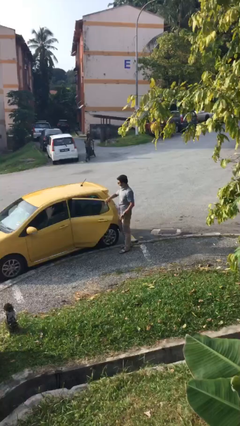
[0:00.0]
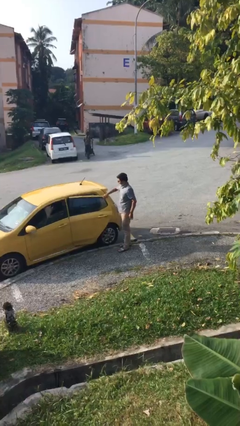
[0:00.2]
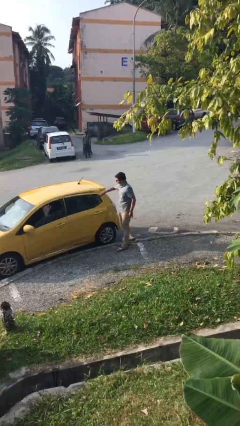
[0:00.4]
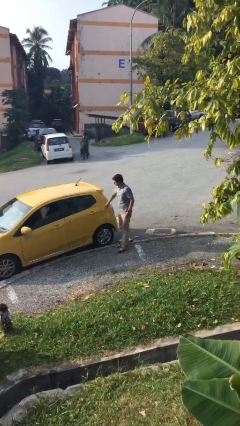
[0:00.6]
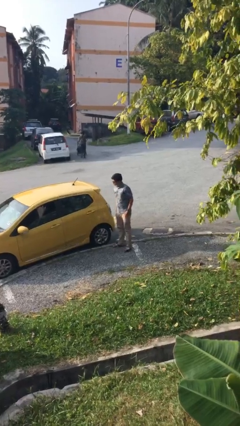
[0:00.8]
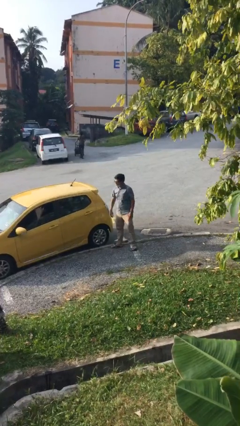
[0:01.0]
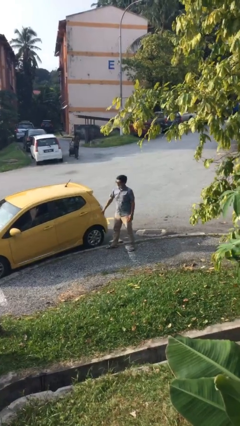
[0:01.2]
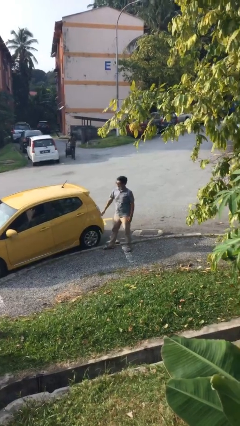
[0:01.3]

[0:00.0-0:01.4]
person closes car door

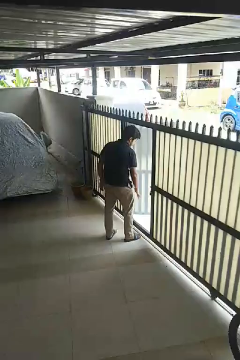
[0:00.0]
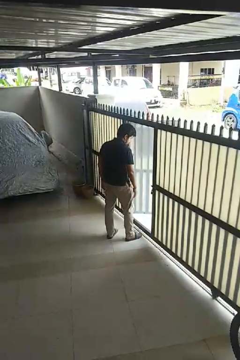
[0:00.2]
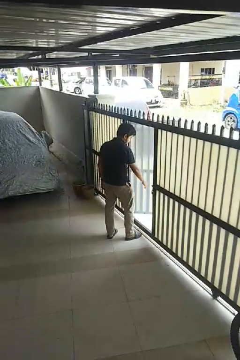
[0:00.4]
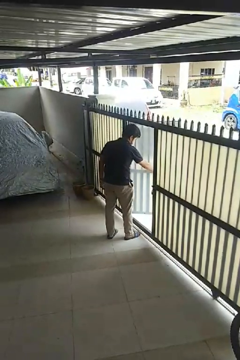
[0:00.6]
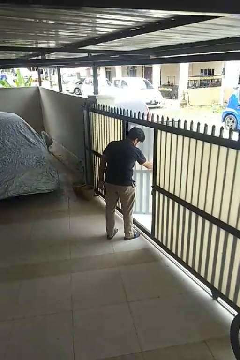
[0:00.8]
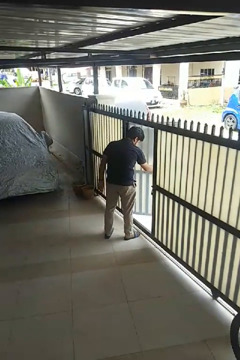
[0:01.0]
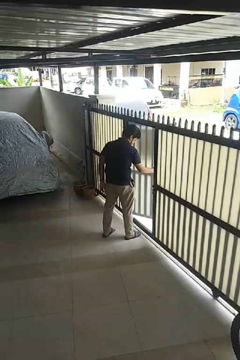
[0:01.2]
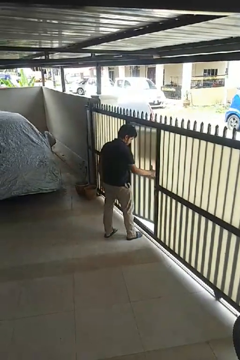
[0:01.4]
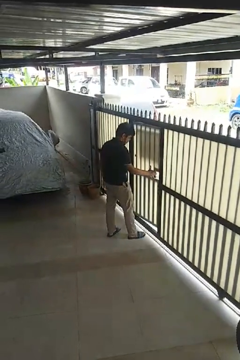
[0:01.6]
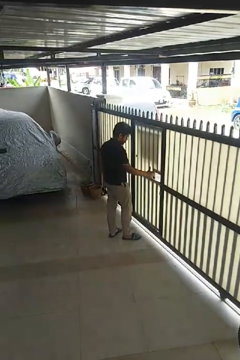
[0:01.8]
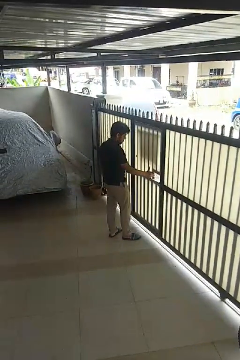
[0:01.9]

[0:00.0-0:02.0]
person closes gate

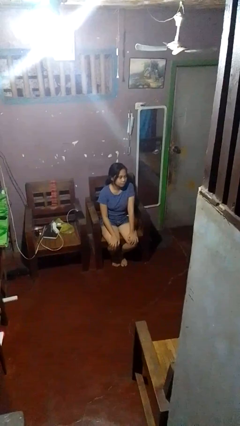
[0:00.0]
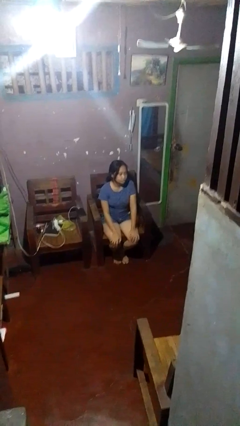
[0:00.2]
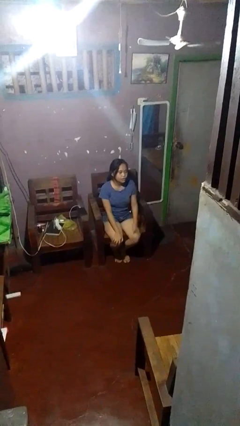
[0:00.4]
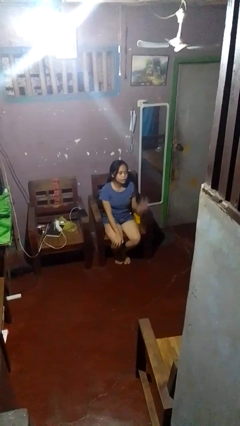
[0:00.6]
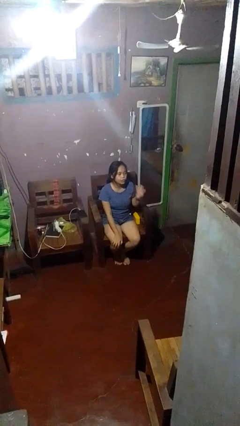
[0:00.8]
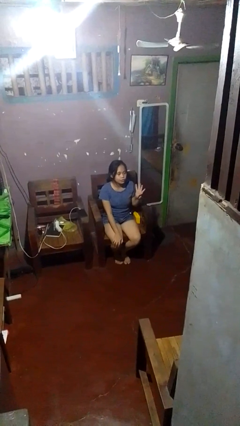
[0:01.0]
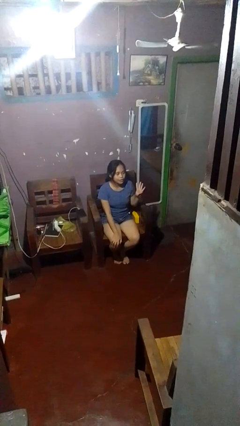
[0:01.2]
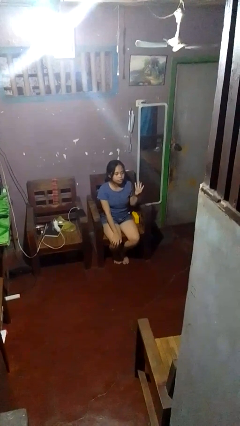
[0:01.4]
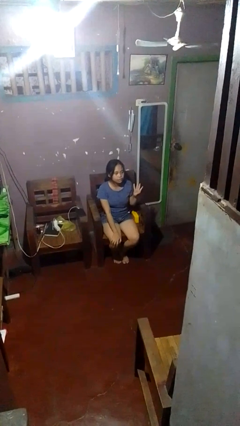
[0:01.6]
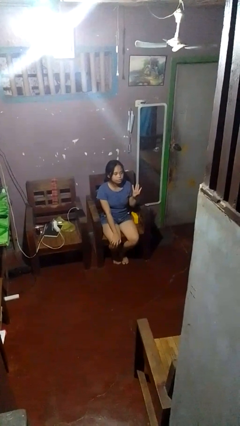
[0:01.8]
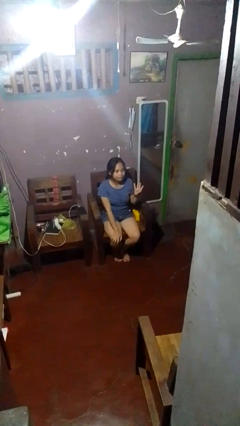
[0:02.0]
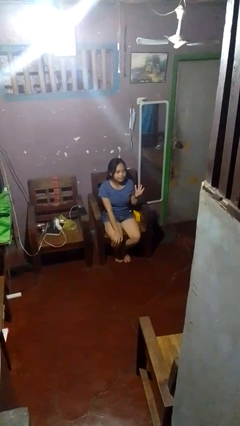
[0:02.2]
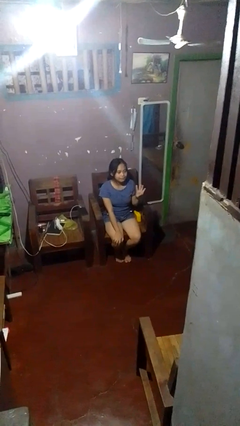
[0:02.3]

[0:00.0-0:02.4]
person gestures number four

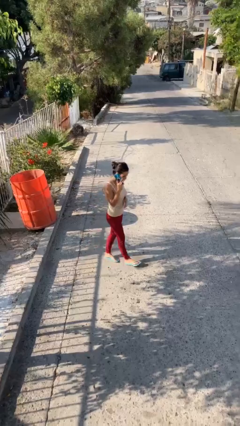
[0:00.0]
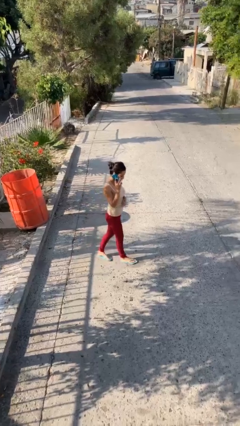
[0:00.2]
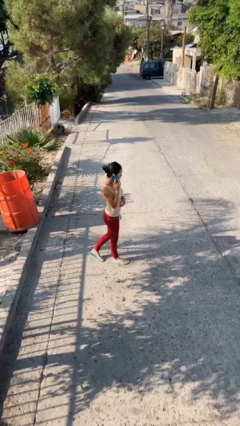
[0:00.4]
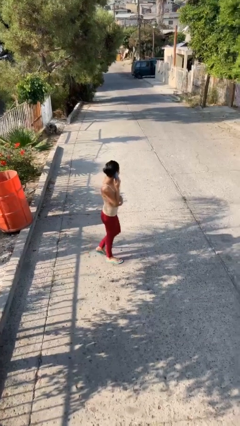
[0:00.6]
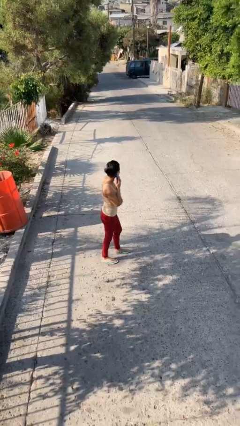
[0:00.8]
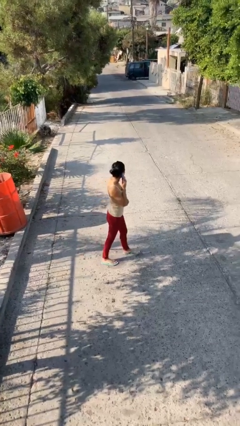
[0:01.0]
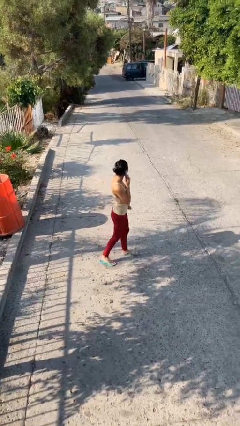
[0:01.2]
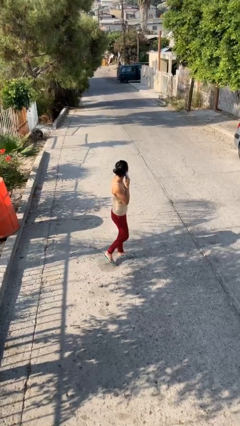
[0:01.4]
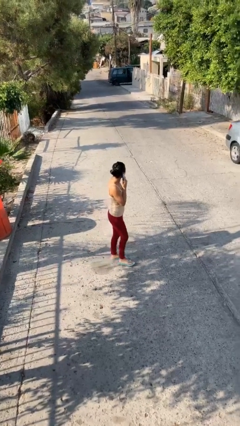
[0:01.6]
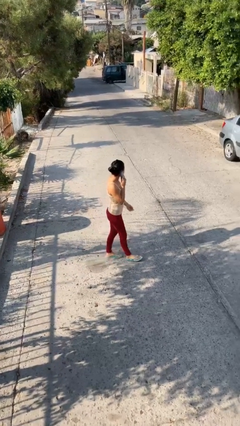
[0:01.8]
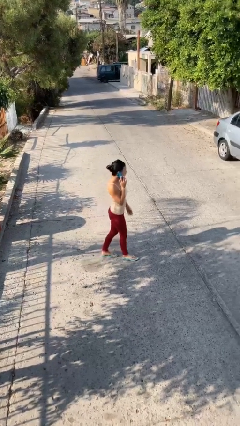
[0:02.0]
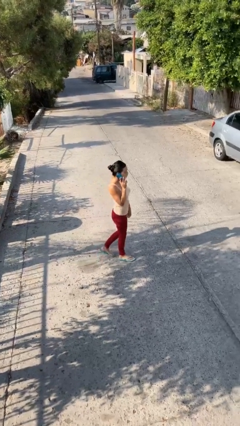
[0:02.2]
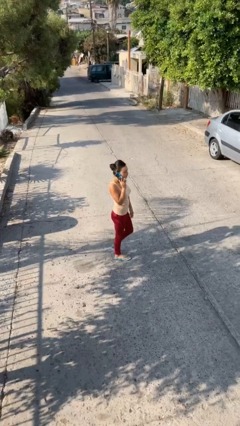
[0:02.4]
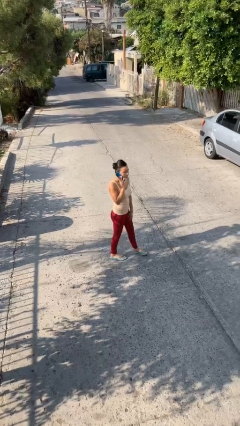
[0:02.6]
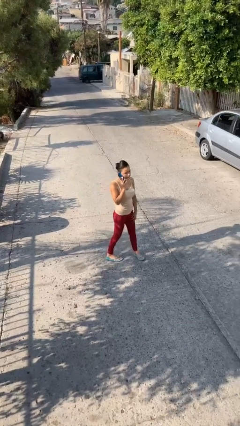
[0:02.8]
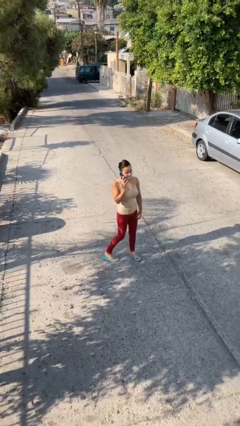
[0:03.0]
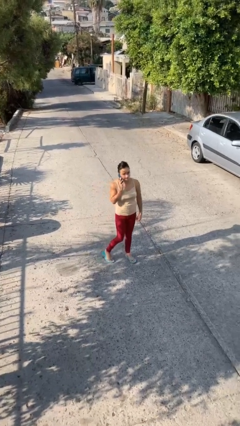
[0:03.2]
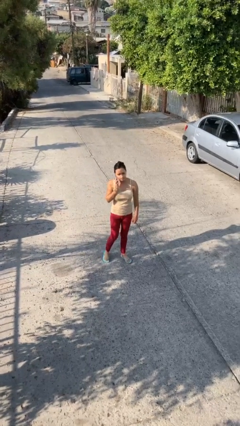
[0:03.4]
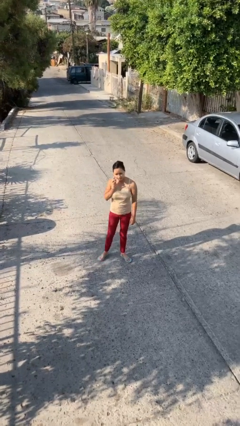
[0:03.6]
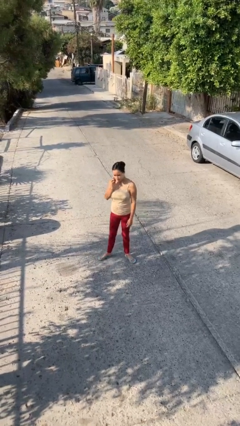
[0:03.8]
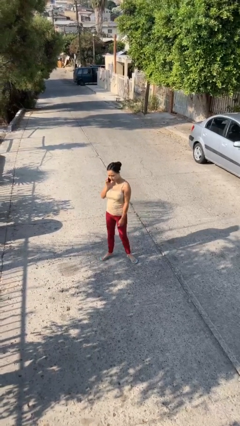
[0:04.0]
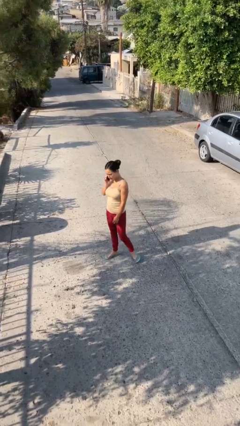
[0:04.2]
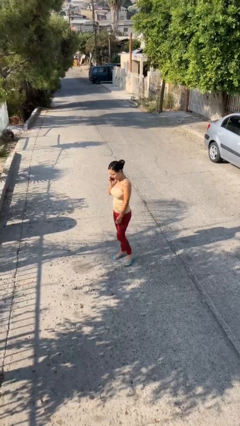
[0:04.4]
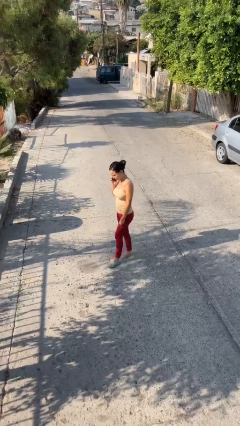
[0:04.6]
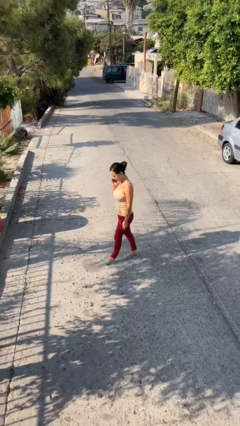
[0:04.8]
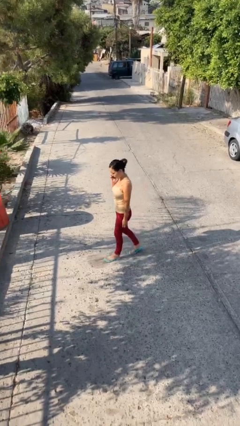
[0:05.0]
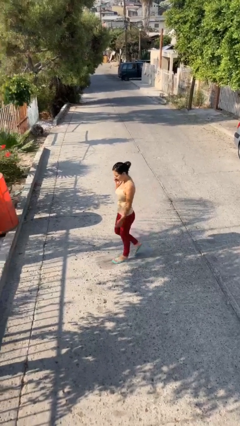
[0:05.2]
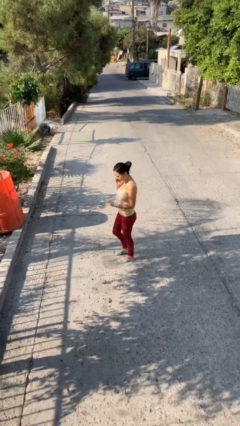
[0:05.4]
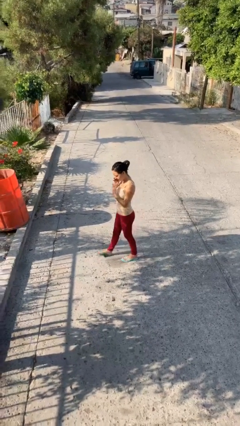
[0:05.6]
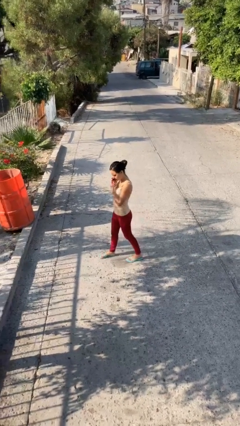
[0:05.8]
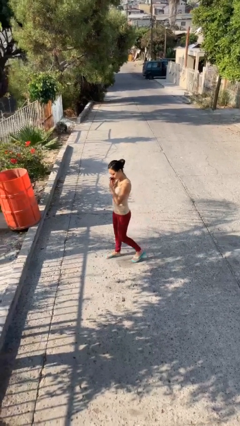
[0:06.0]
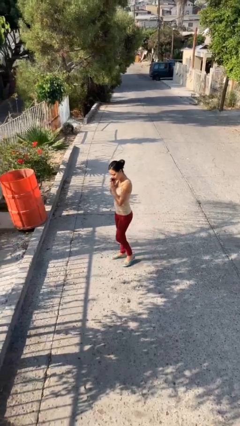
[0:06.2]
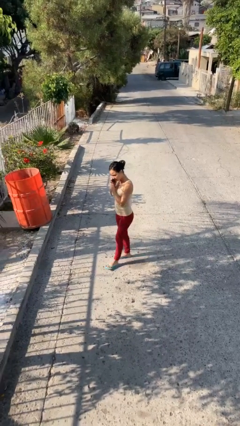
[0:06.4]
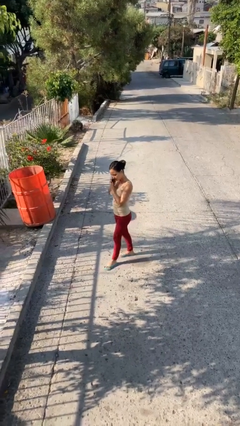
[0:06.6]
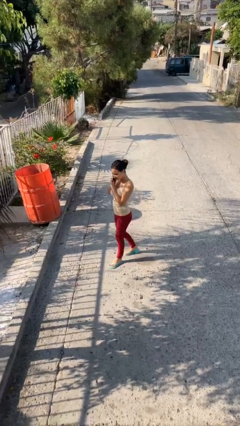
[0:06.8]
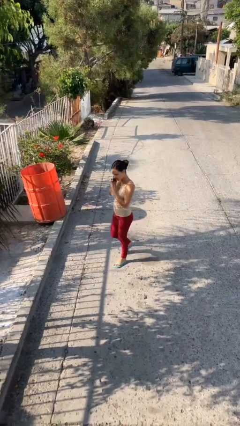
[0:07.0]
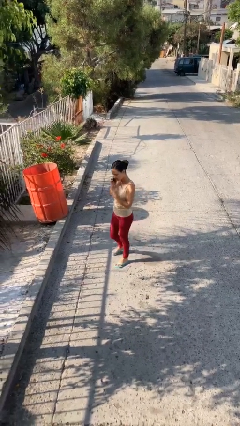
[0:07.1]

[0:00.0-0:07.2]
person talks on phone

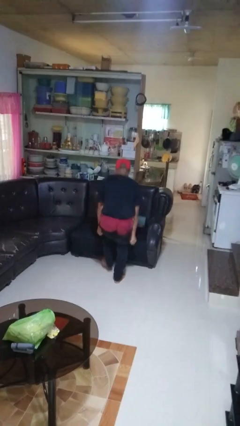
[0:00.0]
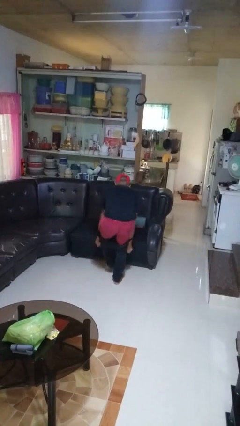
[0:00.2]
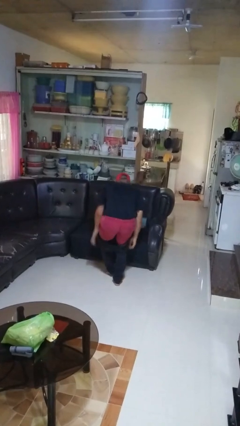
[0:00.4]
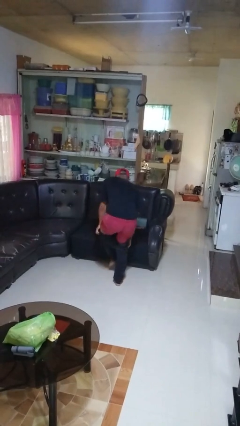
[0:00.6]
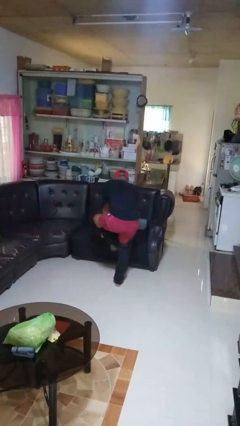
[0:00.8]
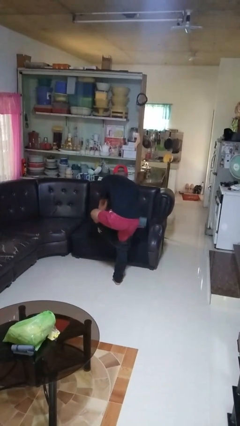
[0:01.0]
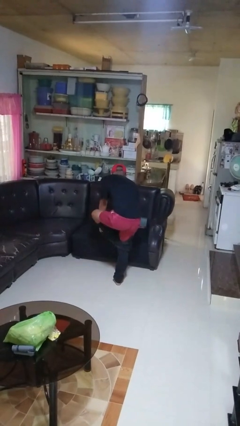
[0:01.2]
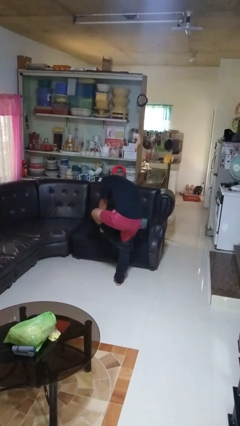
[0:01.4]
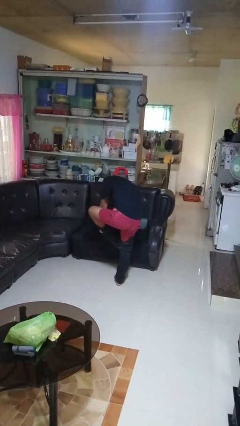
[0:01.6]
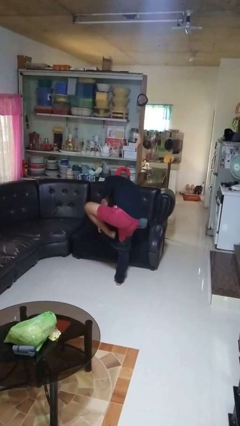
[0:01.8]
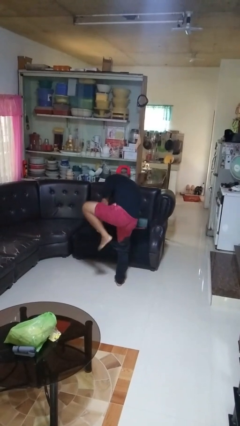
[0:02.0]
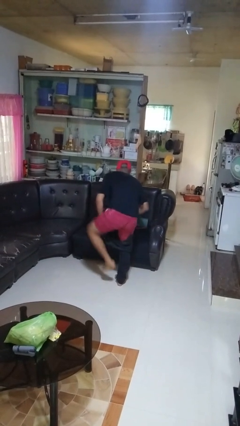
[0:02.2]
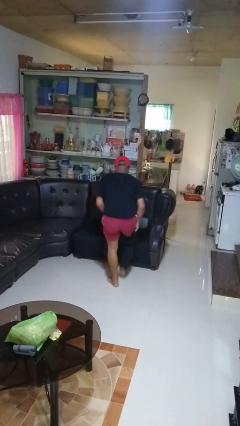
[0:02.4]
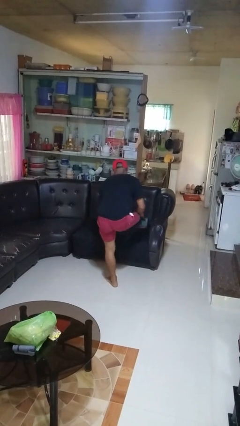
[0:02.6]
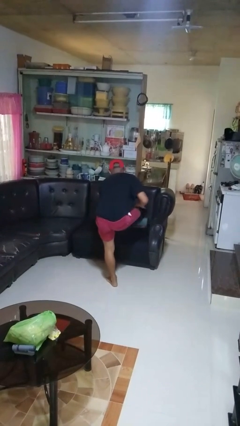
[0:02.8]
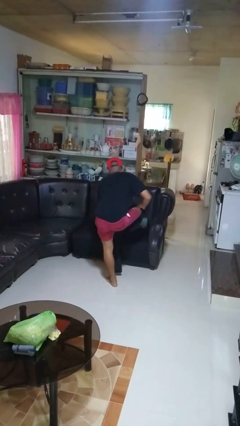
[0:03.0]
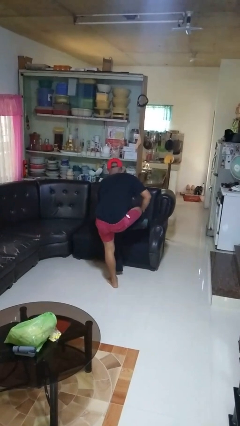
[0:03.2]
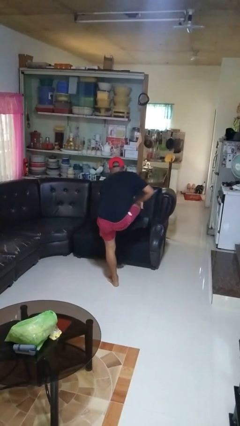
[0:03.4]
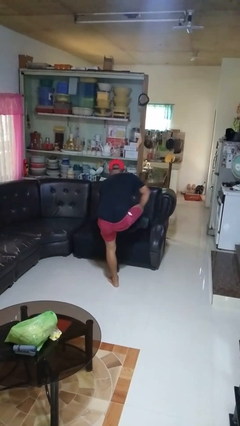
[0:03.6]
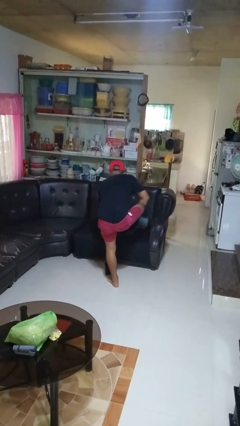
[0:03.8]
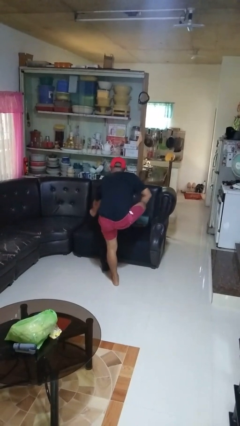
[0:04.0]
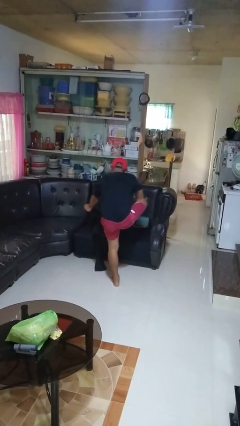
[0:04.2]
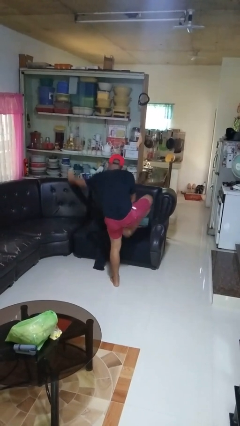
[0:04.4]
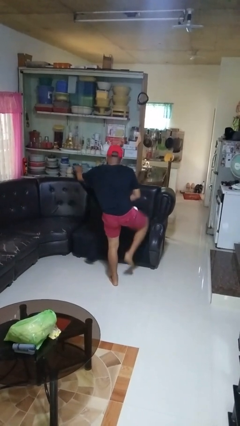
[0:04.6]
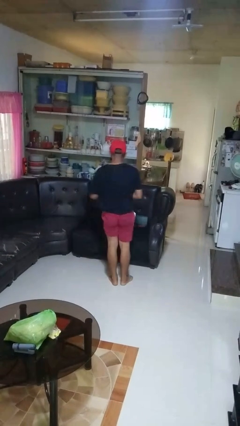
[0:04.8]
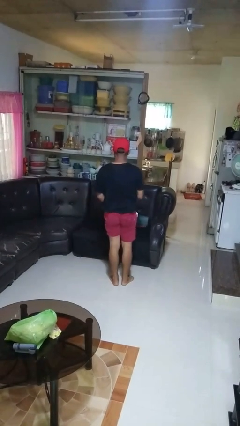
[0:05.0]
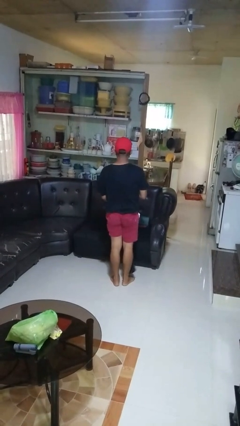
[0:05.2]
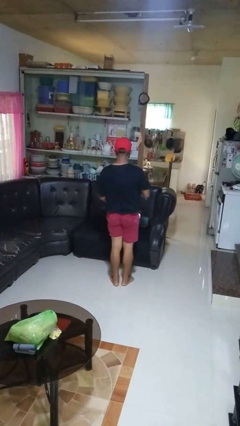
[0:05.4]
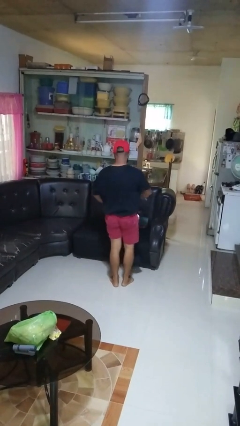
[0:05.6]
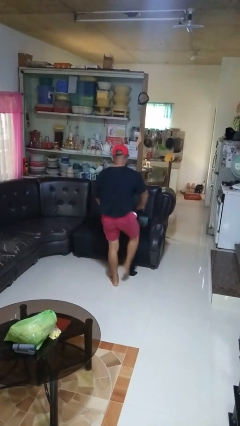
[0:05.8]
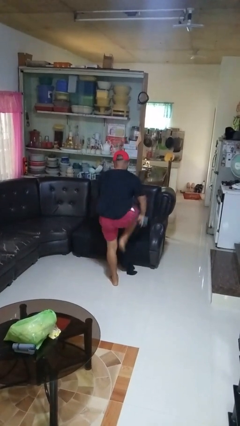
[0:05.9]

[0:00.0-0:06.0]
person takes off pants
